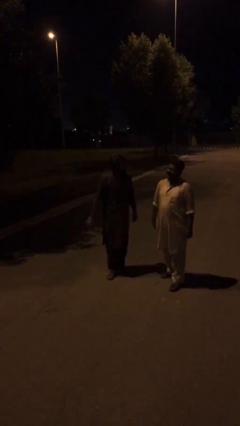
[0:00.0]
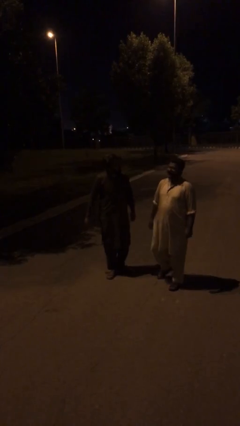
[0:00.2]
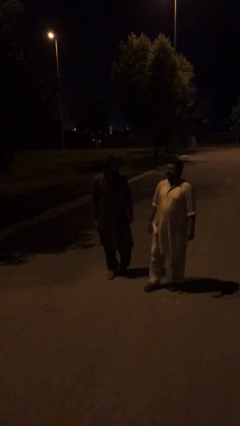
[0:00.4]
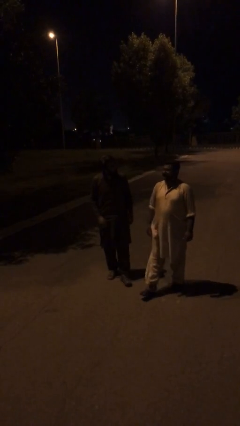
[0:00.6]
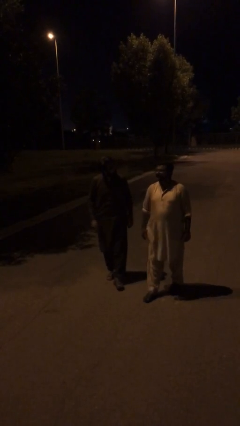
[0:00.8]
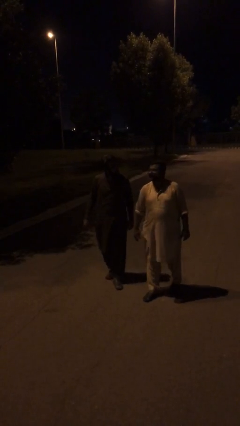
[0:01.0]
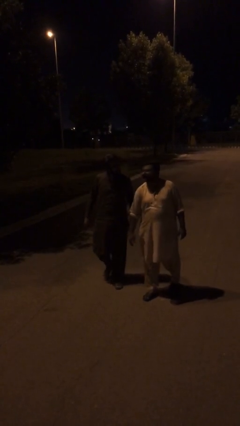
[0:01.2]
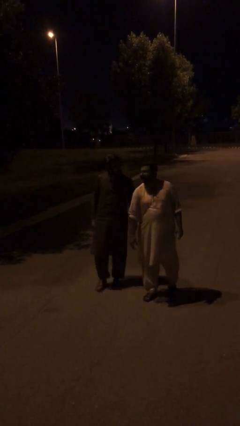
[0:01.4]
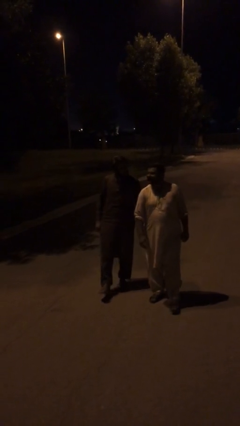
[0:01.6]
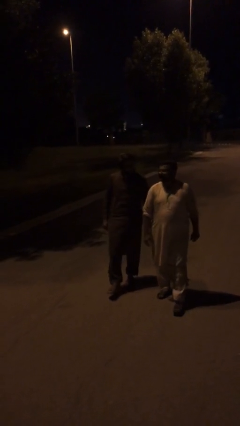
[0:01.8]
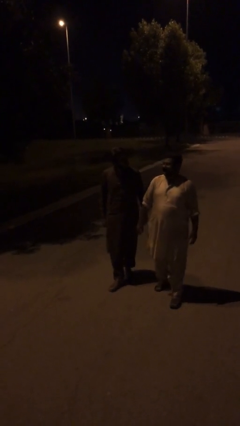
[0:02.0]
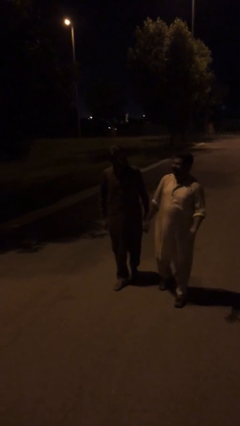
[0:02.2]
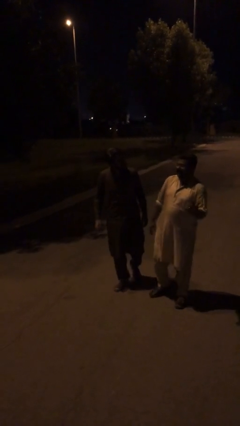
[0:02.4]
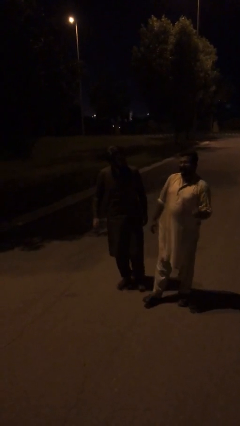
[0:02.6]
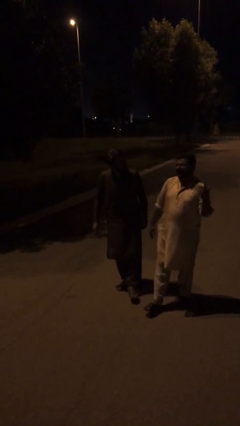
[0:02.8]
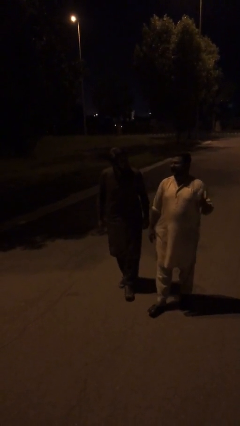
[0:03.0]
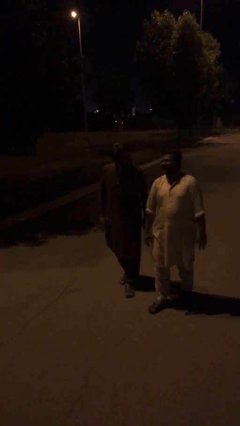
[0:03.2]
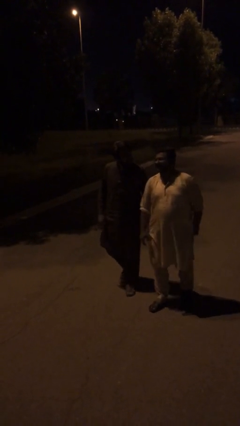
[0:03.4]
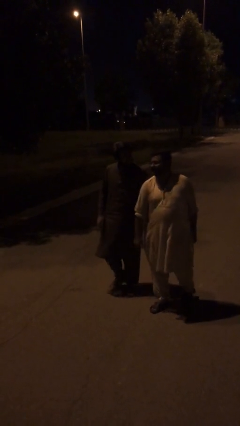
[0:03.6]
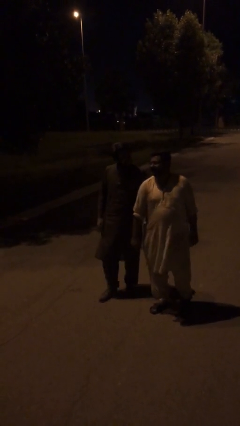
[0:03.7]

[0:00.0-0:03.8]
person talks to person

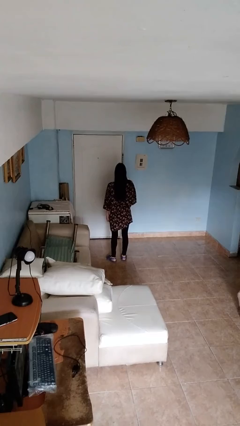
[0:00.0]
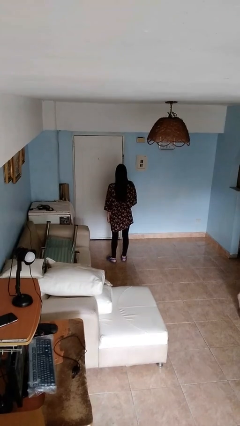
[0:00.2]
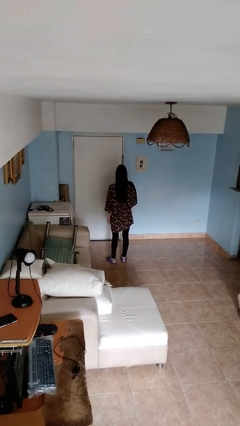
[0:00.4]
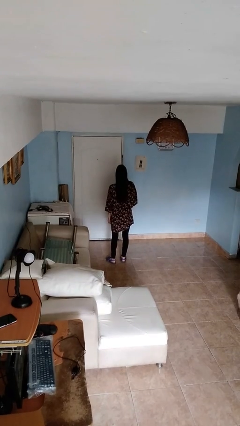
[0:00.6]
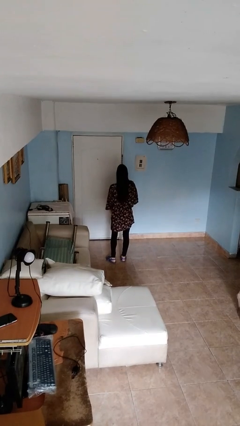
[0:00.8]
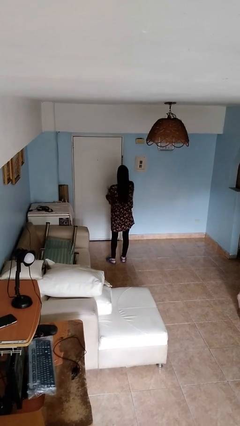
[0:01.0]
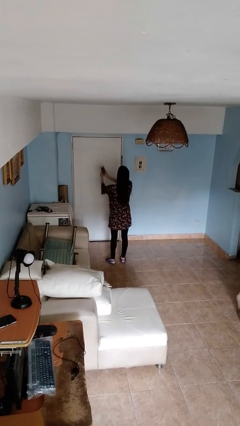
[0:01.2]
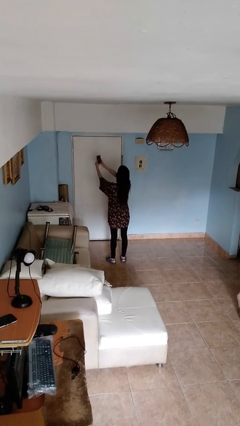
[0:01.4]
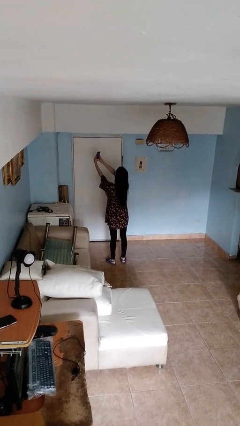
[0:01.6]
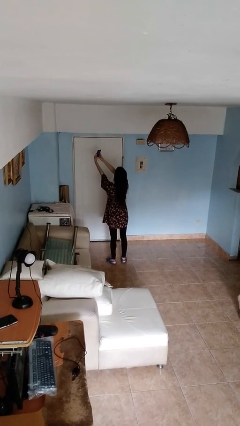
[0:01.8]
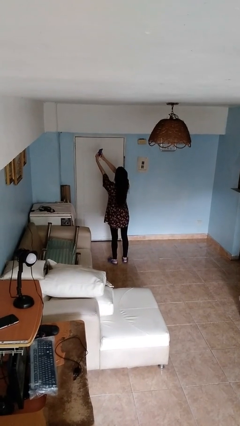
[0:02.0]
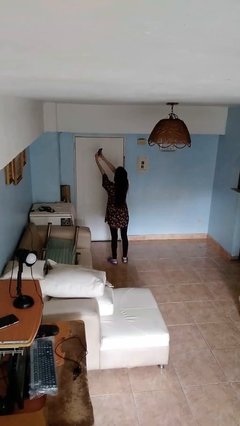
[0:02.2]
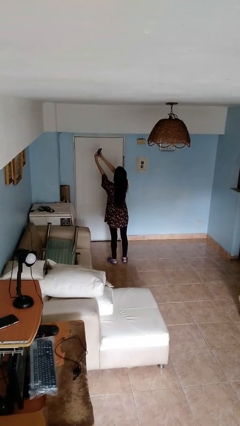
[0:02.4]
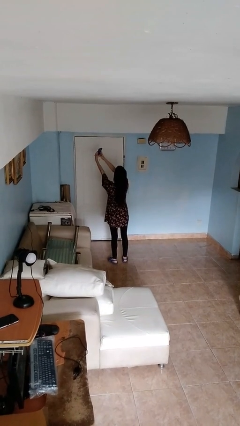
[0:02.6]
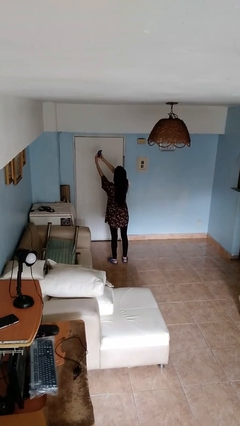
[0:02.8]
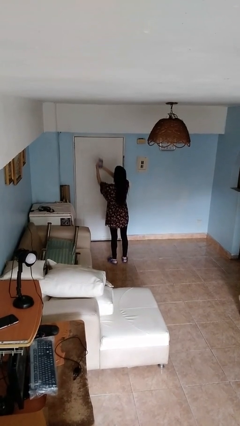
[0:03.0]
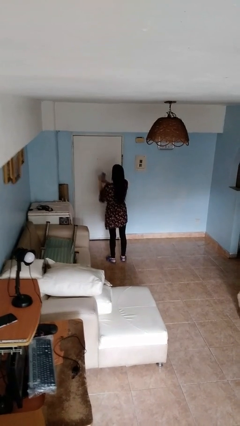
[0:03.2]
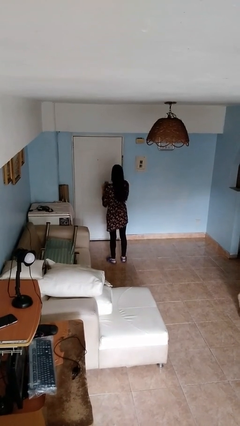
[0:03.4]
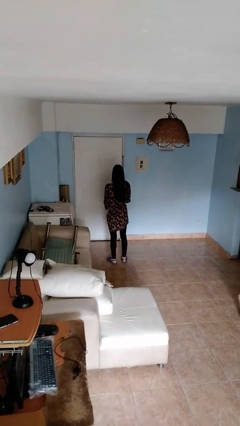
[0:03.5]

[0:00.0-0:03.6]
person takes selfie

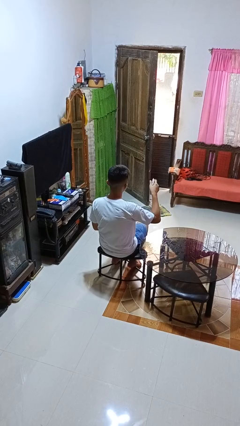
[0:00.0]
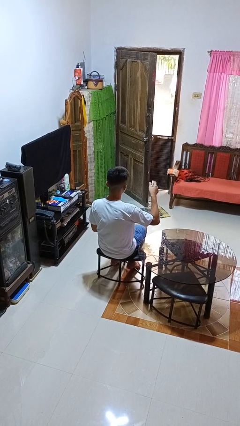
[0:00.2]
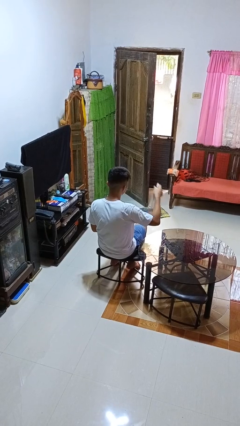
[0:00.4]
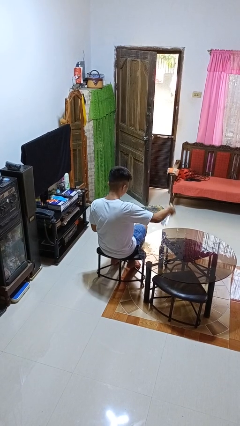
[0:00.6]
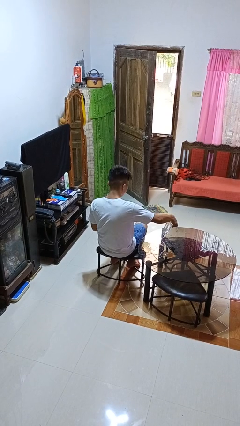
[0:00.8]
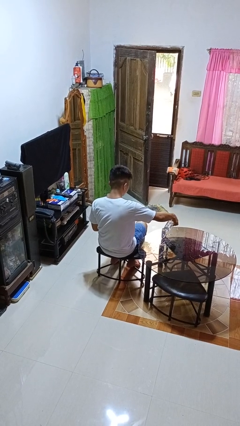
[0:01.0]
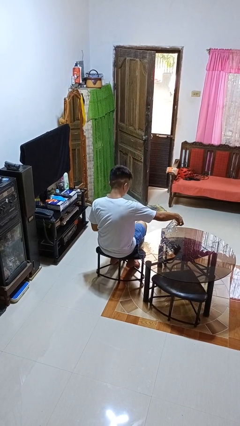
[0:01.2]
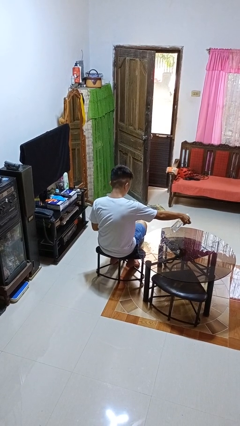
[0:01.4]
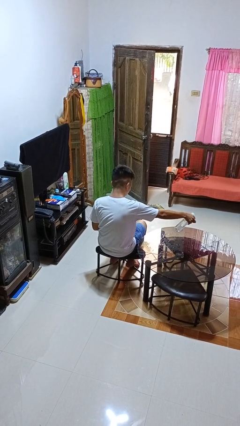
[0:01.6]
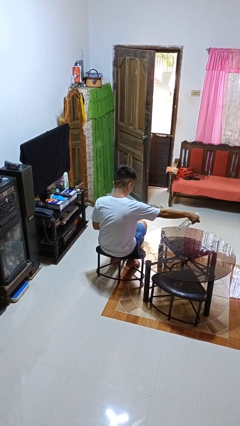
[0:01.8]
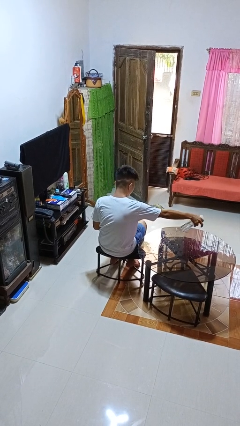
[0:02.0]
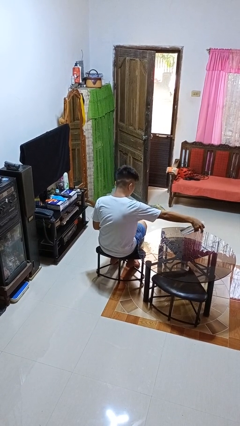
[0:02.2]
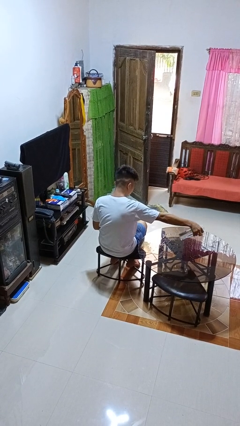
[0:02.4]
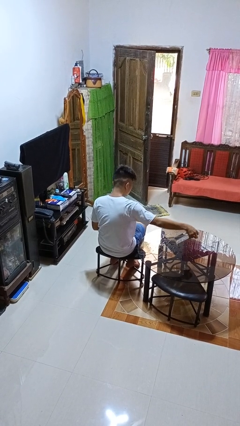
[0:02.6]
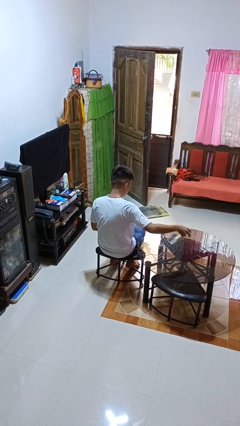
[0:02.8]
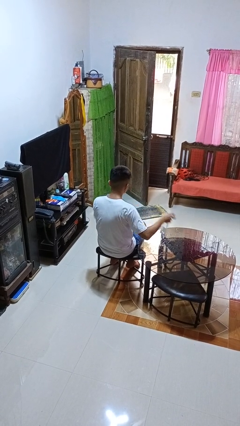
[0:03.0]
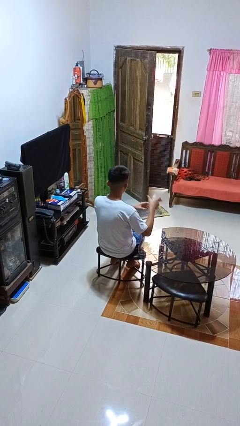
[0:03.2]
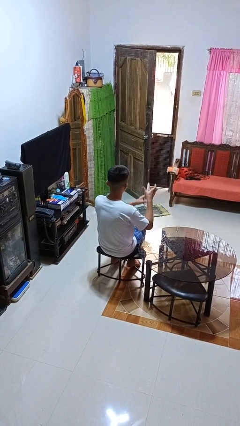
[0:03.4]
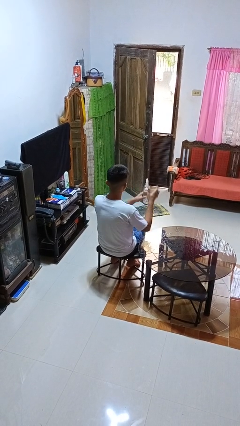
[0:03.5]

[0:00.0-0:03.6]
person sprays from bottle

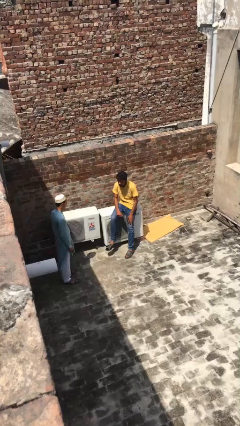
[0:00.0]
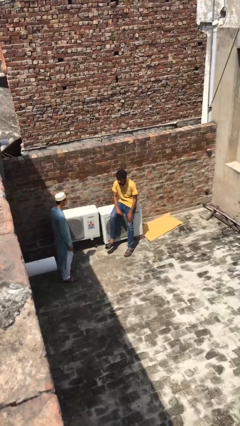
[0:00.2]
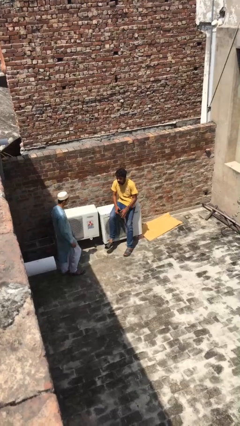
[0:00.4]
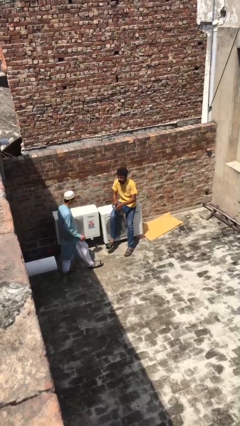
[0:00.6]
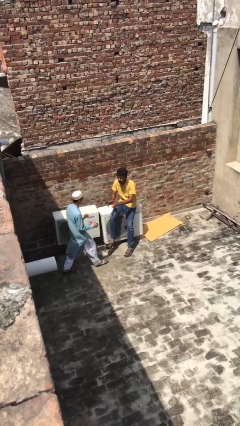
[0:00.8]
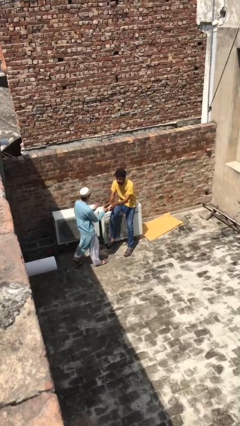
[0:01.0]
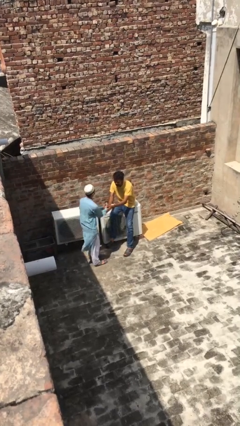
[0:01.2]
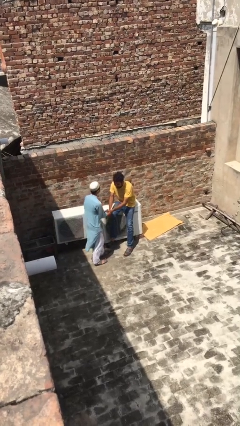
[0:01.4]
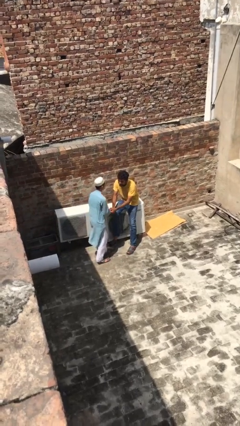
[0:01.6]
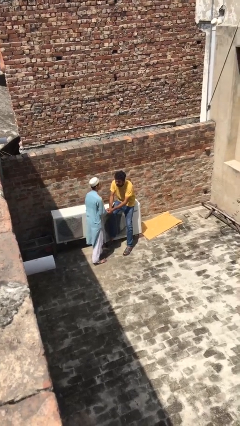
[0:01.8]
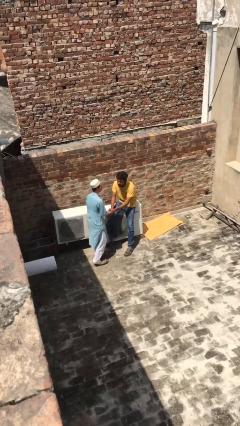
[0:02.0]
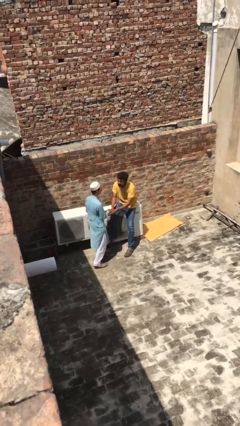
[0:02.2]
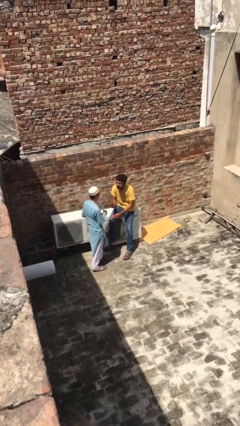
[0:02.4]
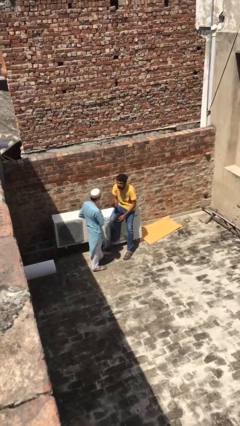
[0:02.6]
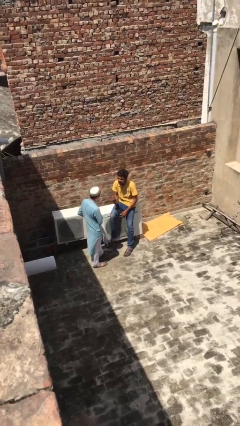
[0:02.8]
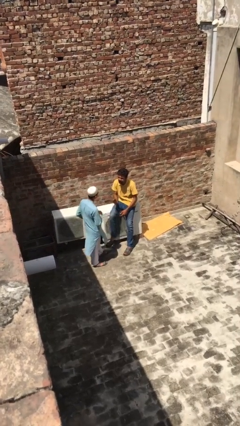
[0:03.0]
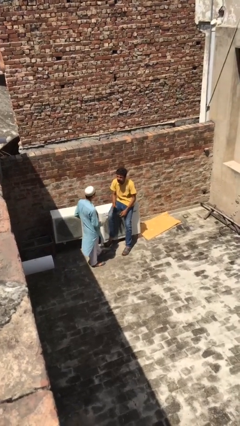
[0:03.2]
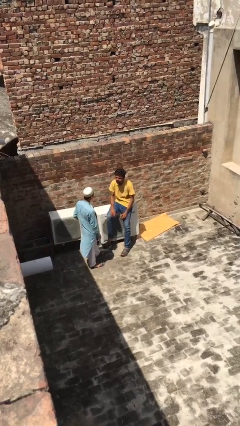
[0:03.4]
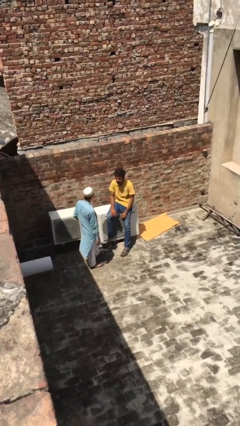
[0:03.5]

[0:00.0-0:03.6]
person shakes hand

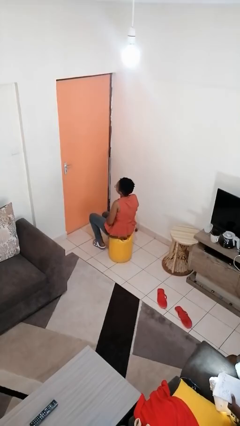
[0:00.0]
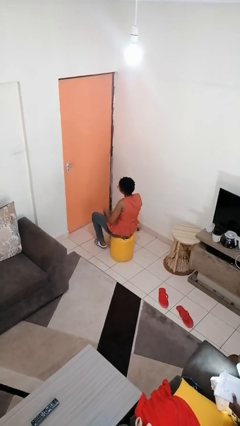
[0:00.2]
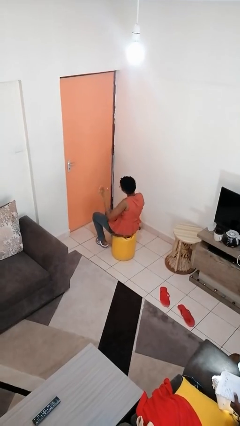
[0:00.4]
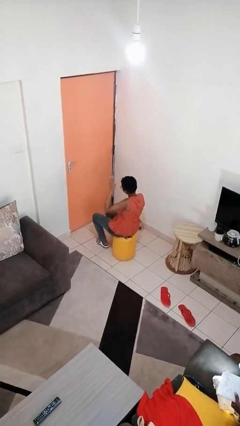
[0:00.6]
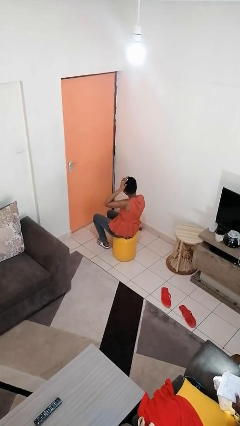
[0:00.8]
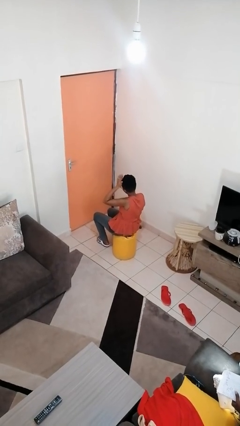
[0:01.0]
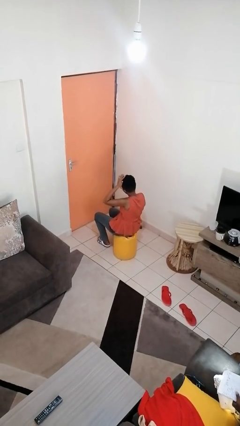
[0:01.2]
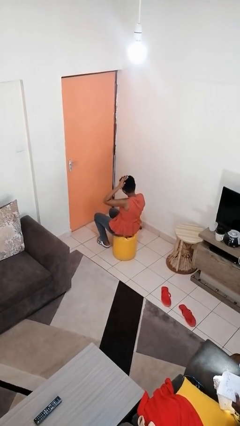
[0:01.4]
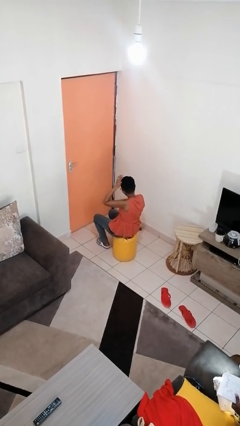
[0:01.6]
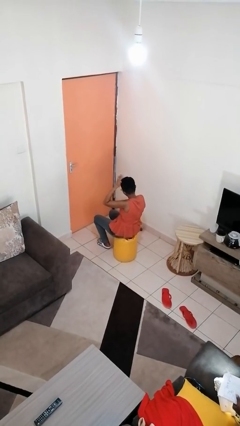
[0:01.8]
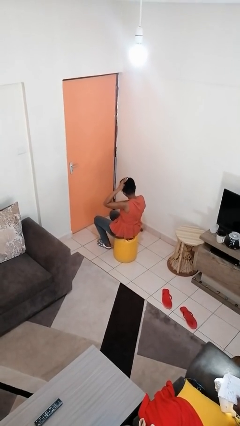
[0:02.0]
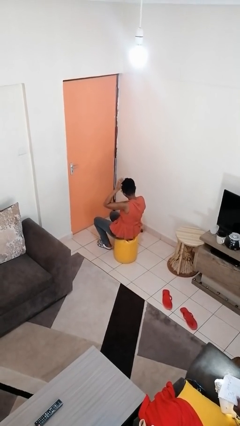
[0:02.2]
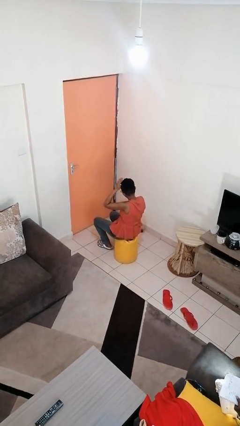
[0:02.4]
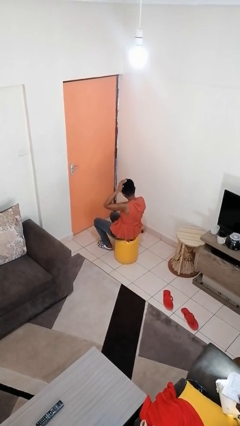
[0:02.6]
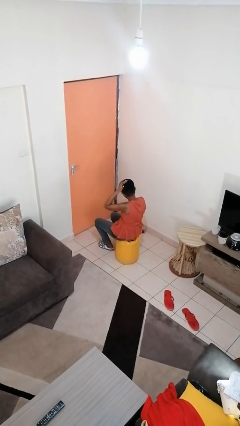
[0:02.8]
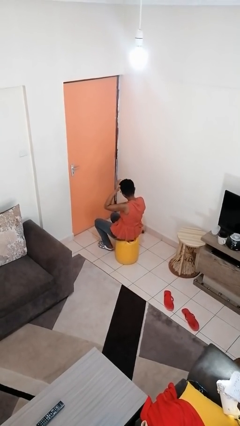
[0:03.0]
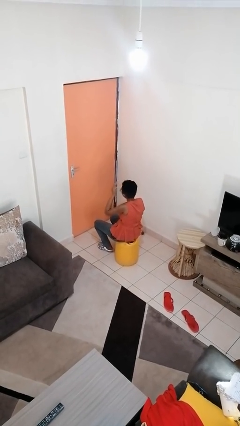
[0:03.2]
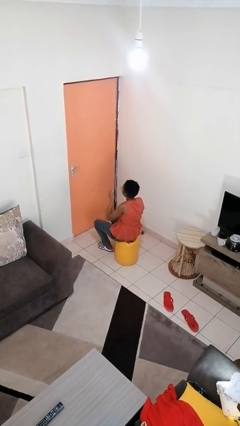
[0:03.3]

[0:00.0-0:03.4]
person pats head
